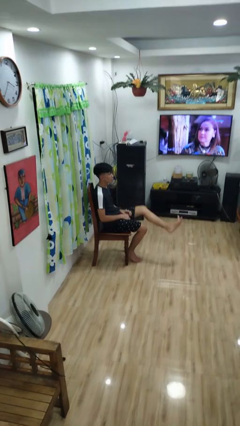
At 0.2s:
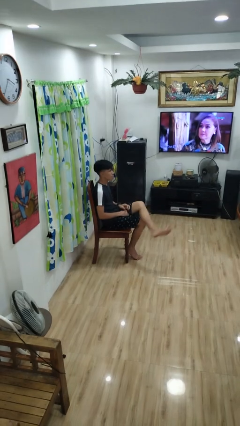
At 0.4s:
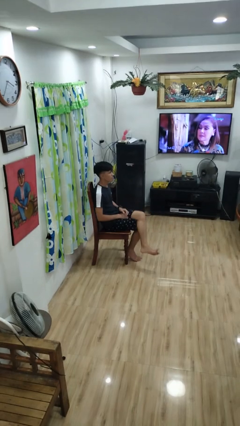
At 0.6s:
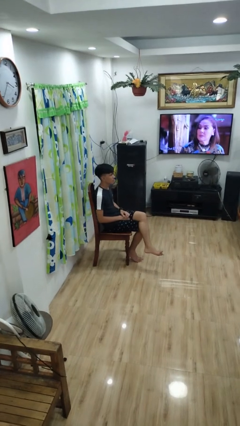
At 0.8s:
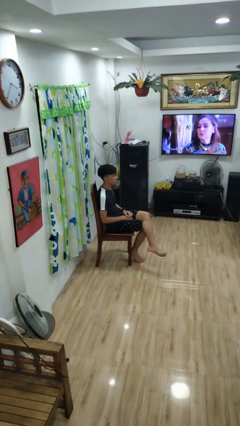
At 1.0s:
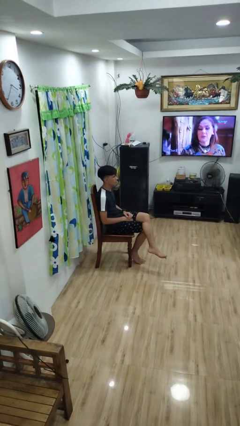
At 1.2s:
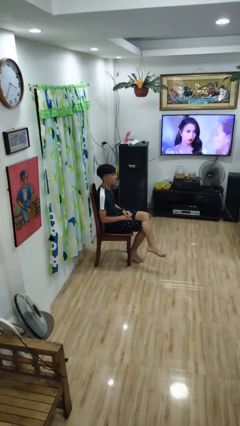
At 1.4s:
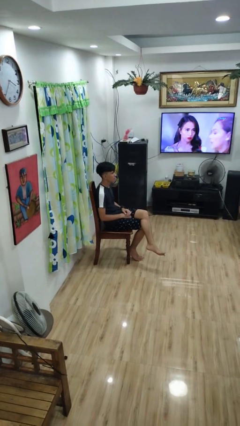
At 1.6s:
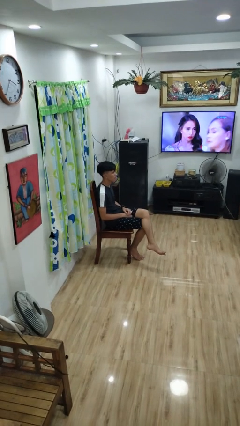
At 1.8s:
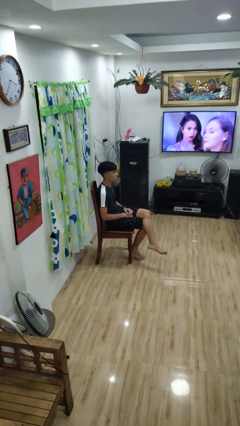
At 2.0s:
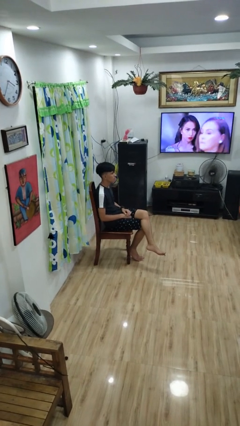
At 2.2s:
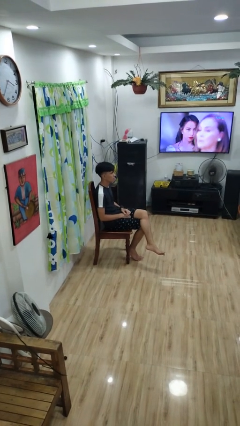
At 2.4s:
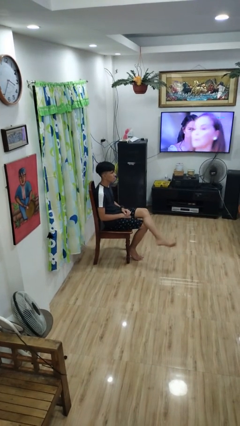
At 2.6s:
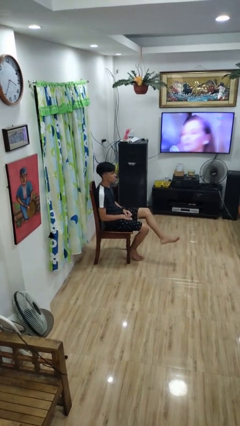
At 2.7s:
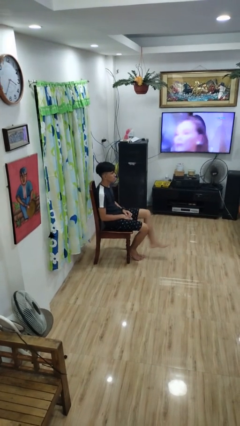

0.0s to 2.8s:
person crosses legs

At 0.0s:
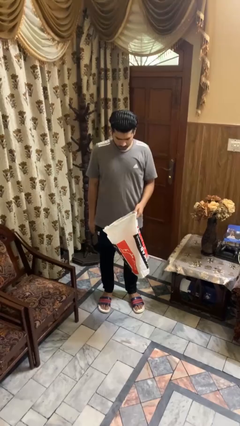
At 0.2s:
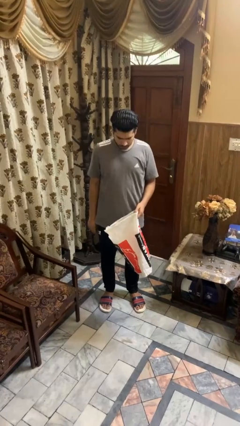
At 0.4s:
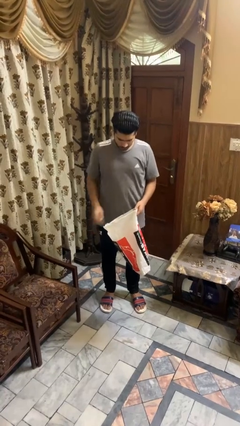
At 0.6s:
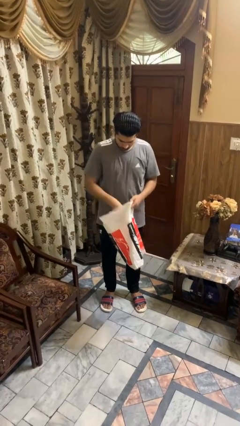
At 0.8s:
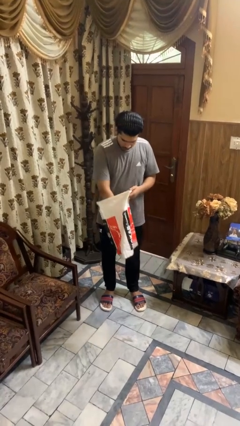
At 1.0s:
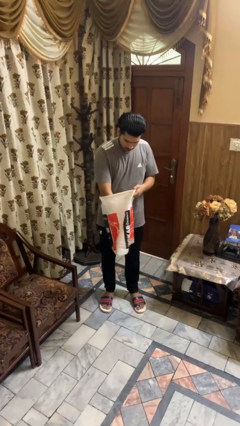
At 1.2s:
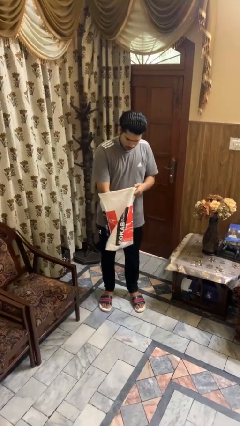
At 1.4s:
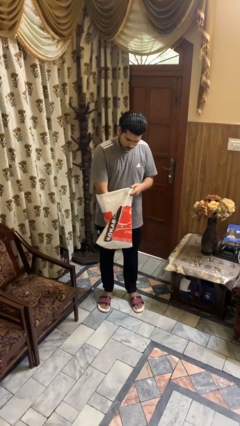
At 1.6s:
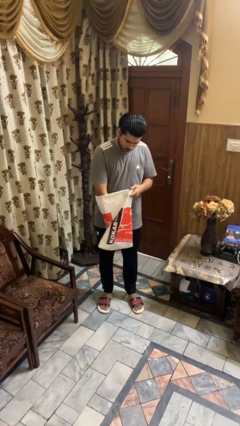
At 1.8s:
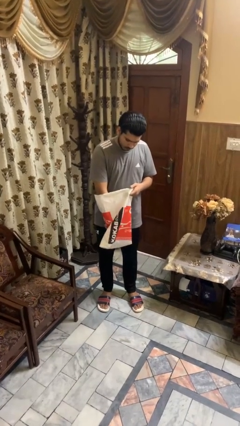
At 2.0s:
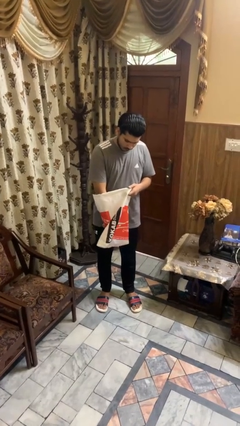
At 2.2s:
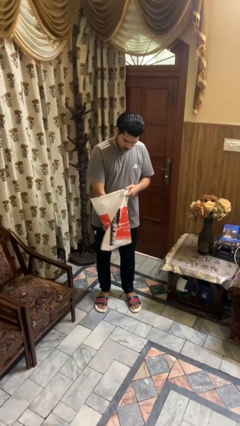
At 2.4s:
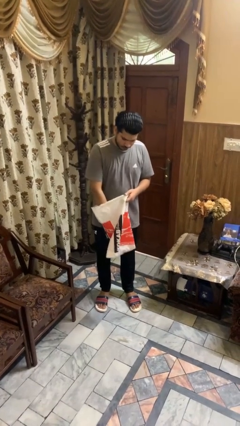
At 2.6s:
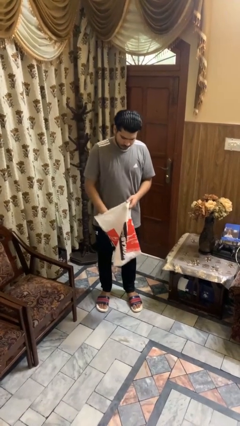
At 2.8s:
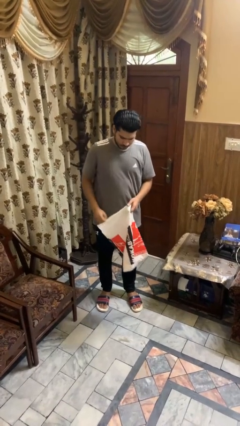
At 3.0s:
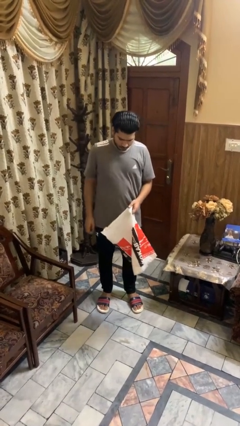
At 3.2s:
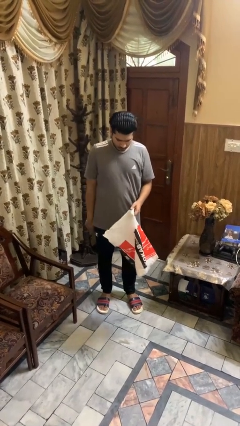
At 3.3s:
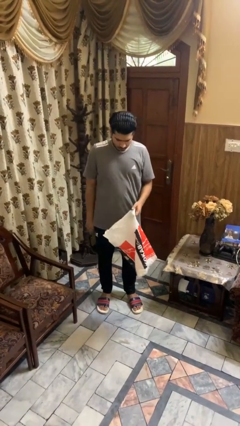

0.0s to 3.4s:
person searches in bag

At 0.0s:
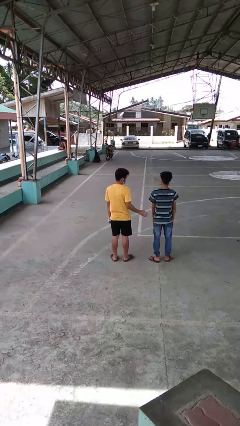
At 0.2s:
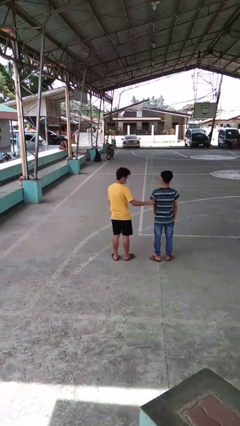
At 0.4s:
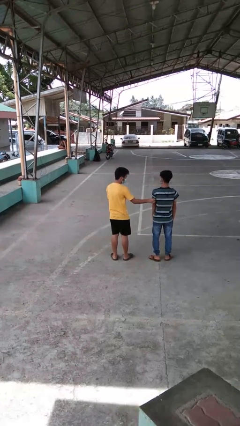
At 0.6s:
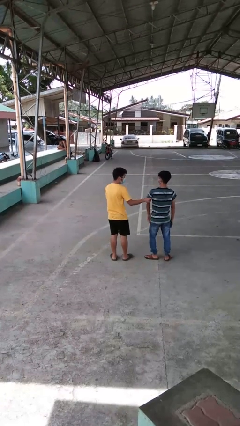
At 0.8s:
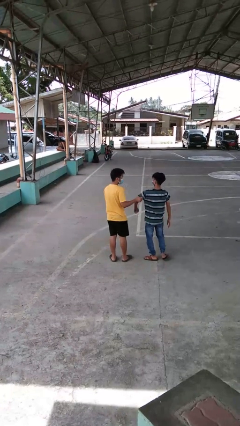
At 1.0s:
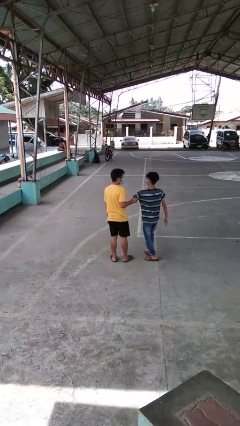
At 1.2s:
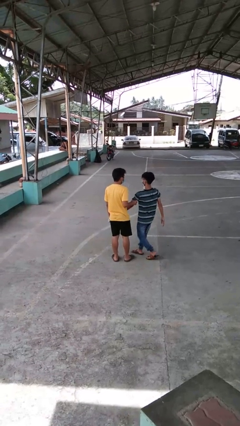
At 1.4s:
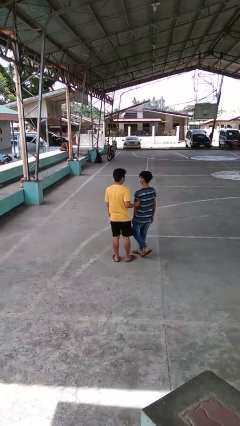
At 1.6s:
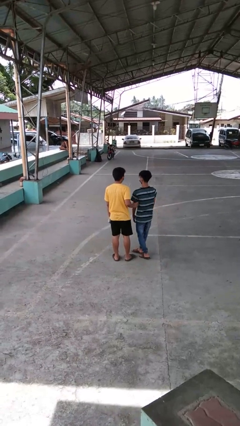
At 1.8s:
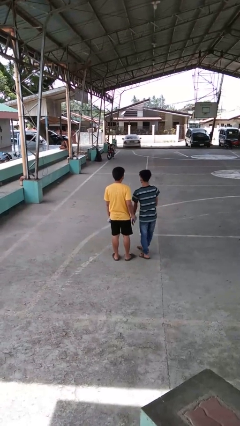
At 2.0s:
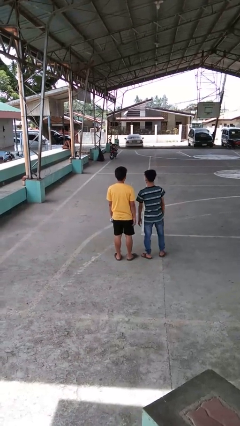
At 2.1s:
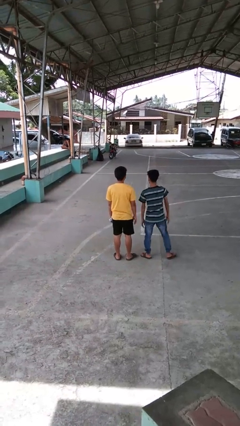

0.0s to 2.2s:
person grabs person by bicep

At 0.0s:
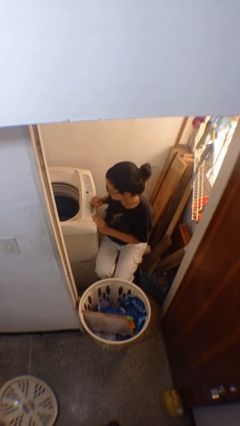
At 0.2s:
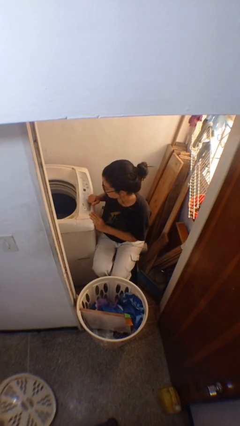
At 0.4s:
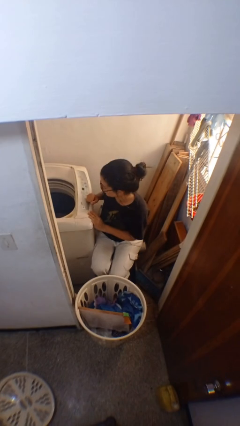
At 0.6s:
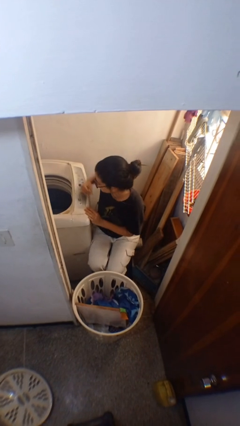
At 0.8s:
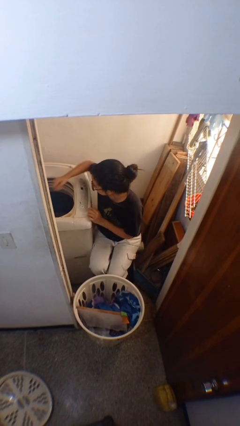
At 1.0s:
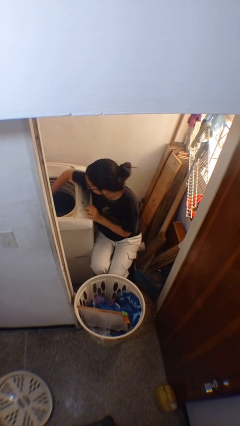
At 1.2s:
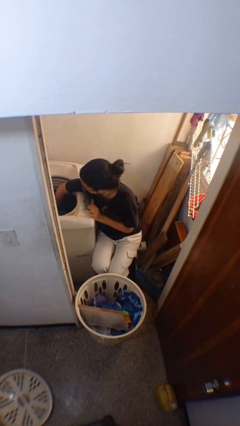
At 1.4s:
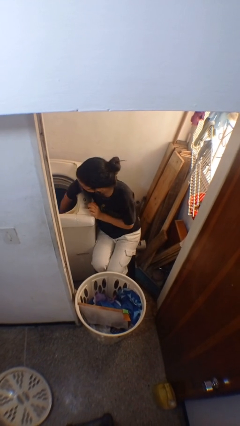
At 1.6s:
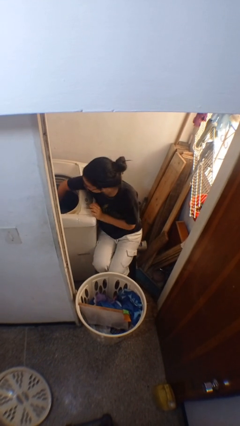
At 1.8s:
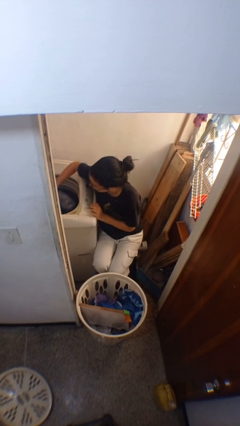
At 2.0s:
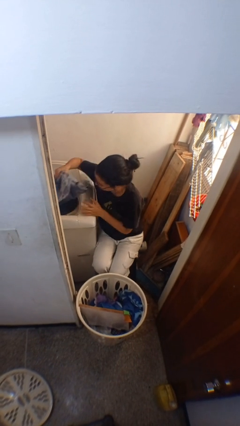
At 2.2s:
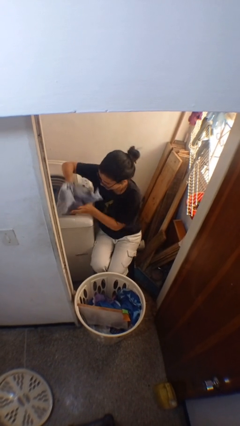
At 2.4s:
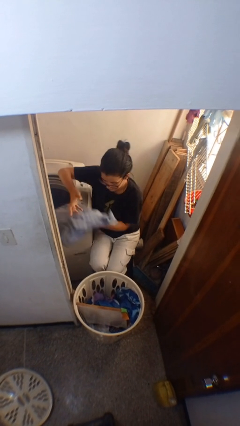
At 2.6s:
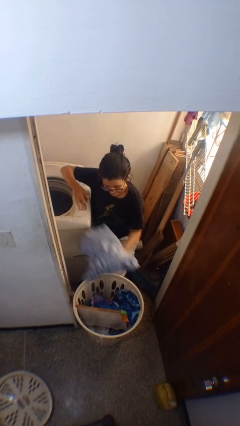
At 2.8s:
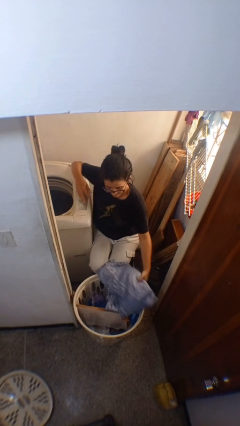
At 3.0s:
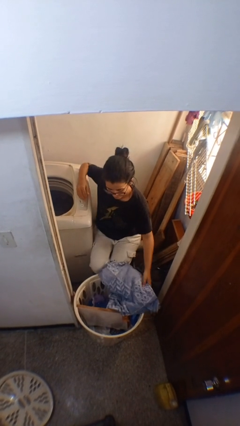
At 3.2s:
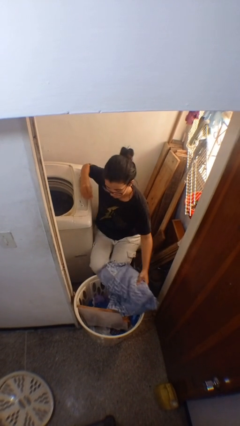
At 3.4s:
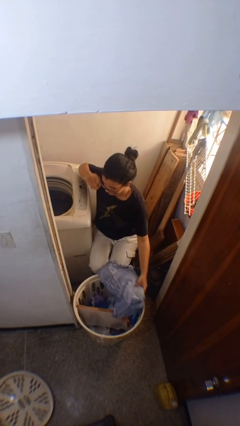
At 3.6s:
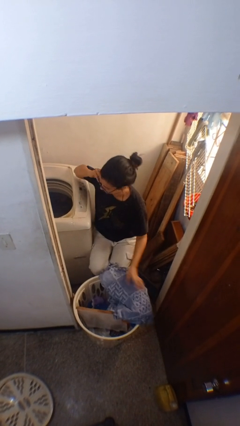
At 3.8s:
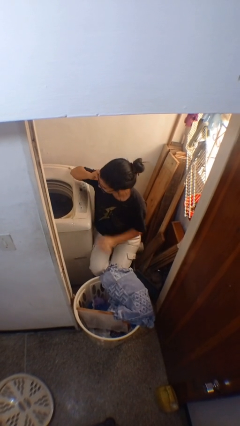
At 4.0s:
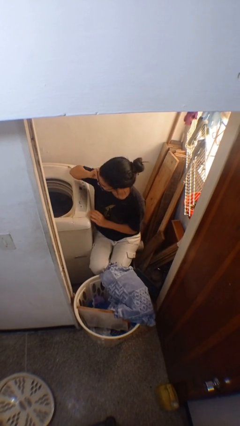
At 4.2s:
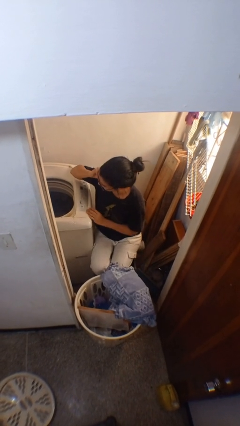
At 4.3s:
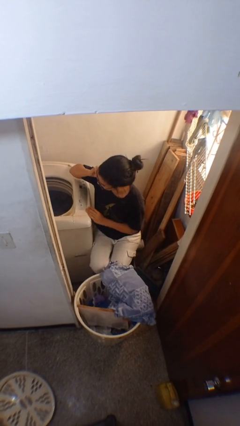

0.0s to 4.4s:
person unloads clotheswasher

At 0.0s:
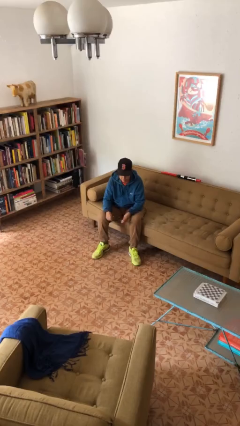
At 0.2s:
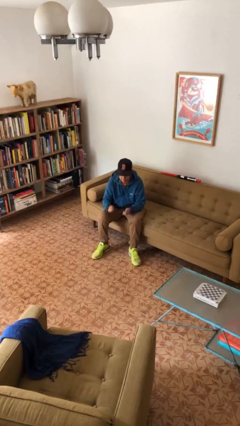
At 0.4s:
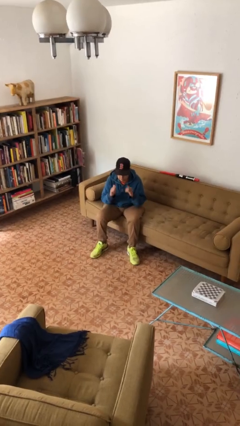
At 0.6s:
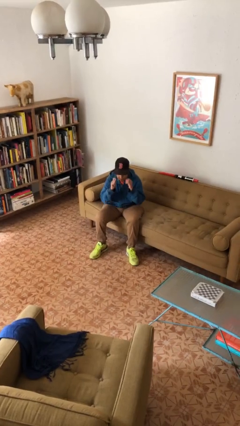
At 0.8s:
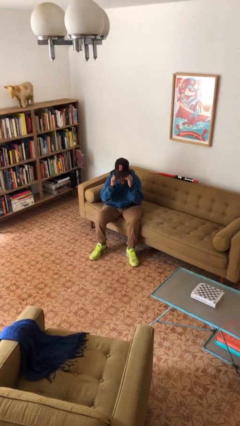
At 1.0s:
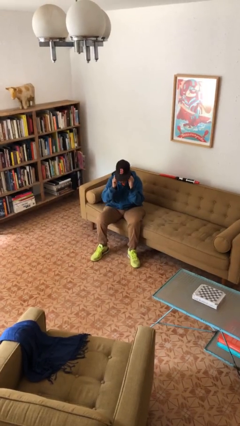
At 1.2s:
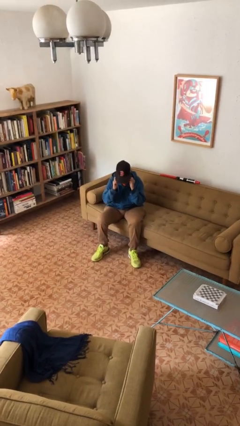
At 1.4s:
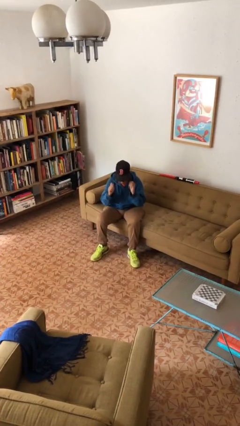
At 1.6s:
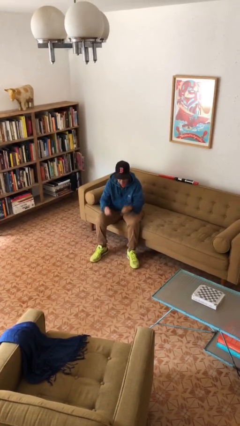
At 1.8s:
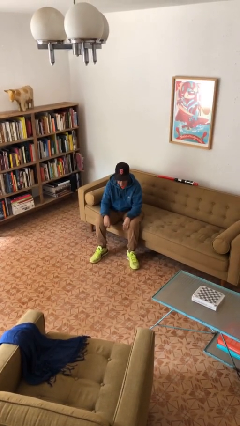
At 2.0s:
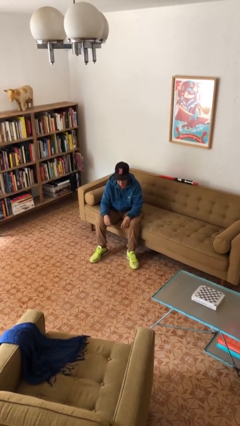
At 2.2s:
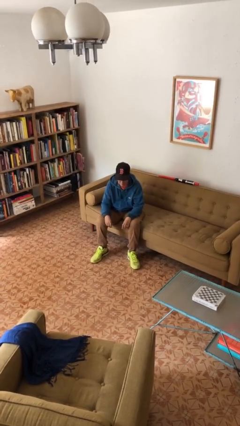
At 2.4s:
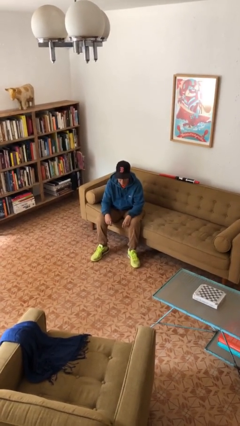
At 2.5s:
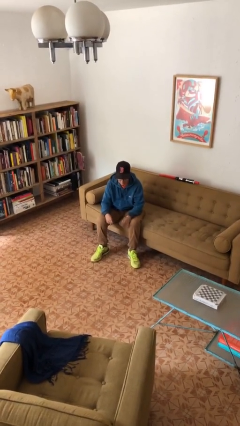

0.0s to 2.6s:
person puts on glasses

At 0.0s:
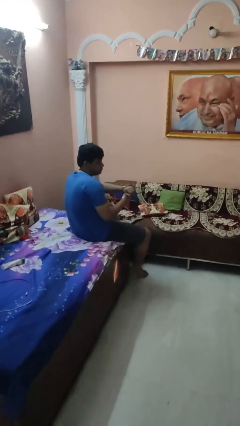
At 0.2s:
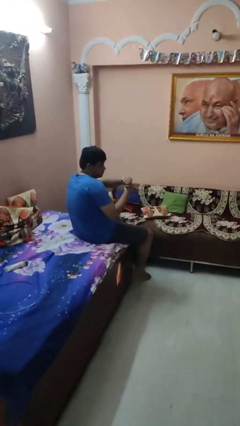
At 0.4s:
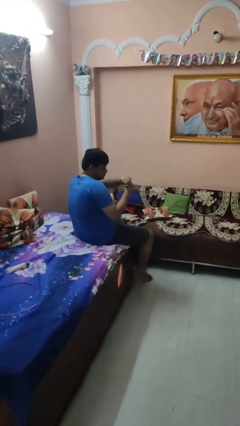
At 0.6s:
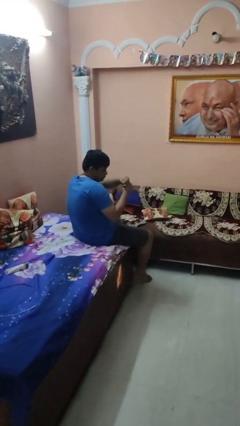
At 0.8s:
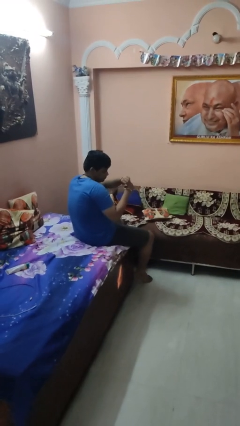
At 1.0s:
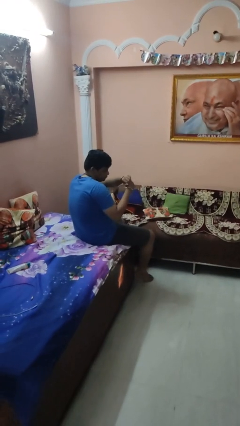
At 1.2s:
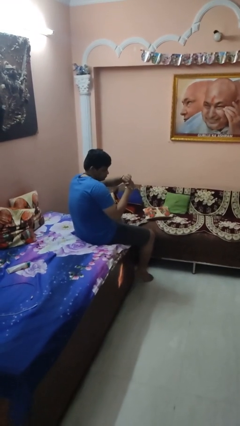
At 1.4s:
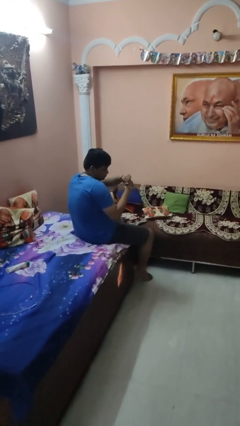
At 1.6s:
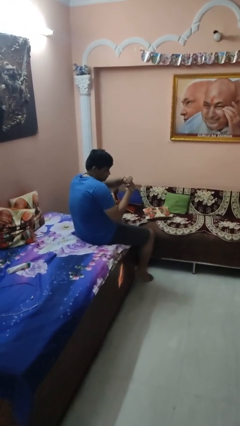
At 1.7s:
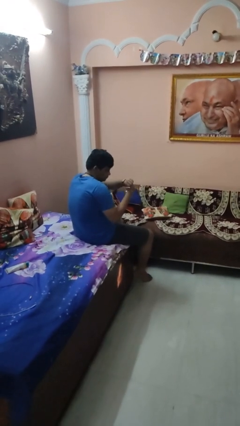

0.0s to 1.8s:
person looks at wristwatch
